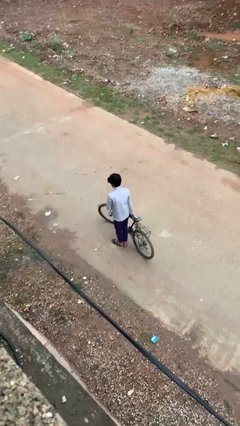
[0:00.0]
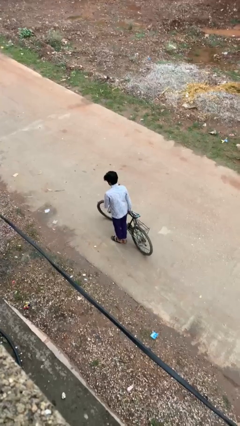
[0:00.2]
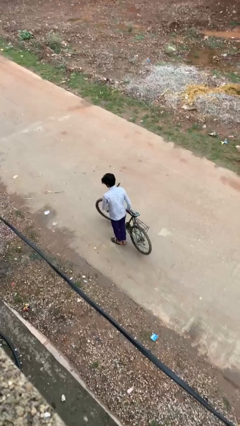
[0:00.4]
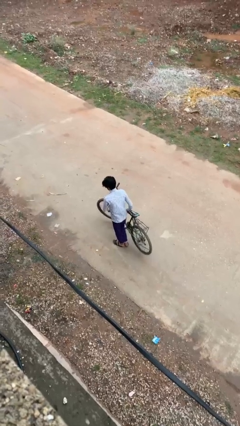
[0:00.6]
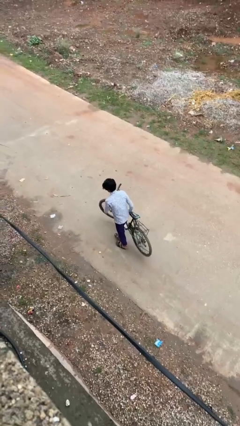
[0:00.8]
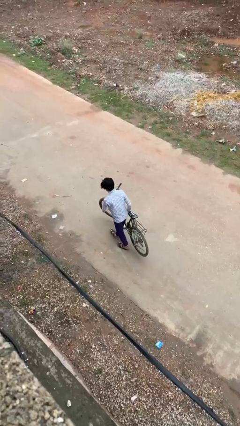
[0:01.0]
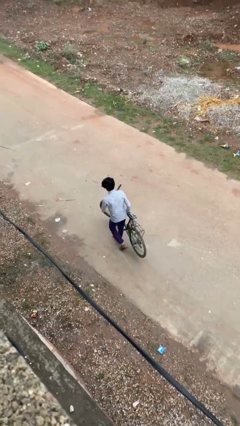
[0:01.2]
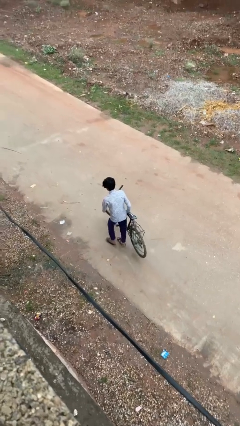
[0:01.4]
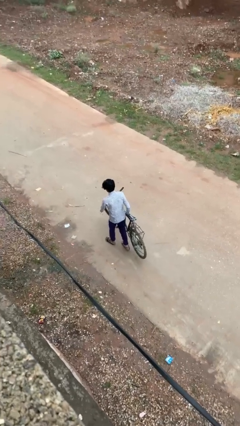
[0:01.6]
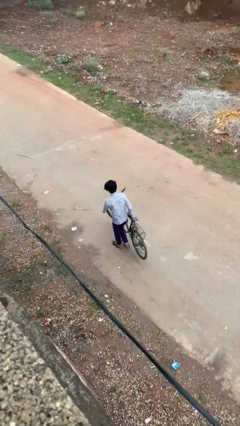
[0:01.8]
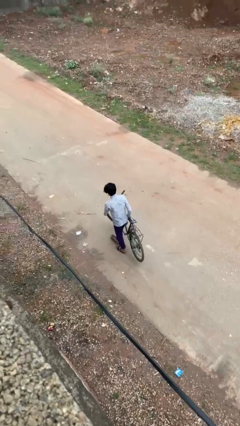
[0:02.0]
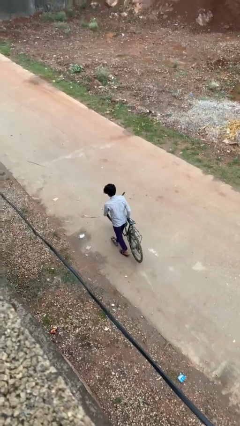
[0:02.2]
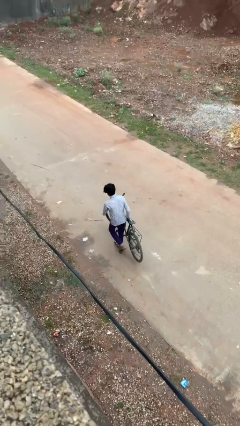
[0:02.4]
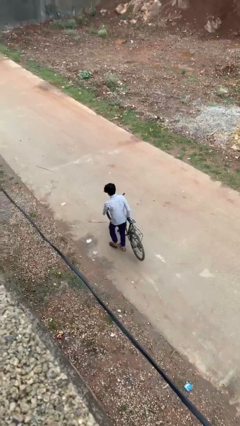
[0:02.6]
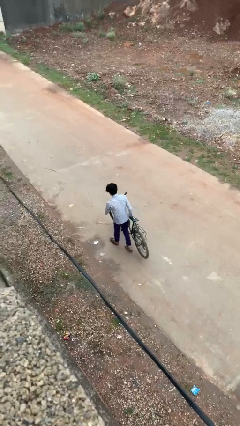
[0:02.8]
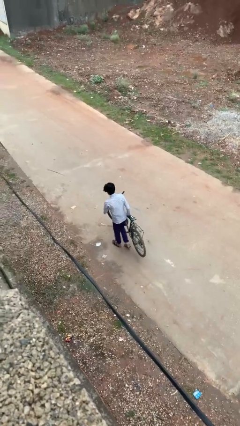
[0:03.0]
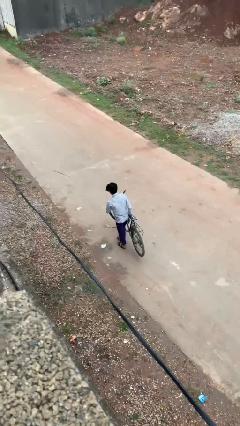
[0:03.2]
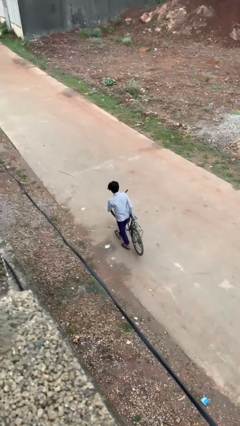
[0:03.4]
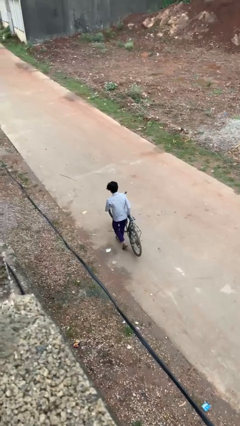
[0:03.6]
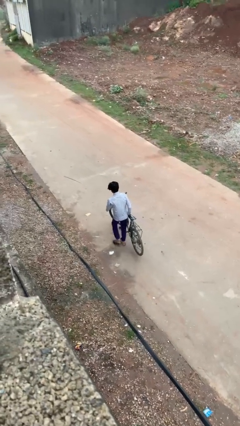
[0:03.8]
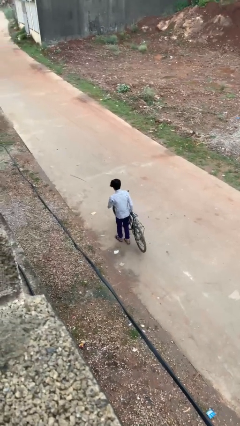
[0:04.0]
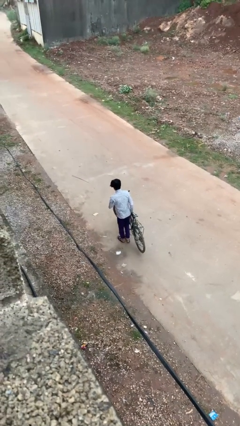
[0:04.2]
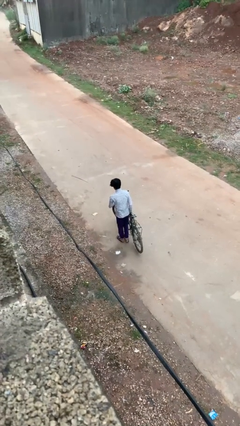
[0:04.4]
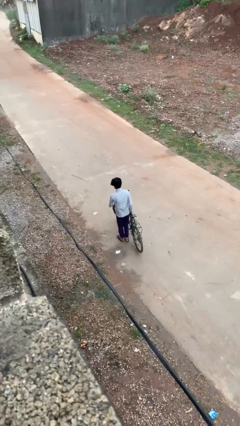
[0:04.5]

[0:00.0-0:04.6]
person carries bicycle

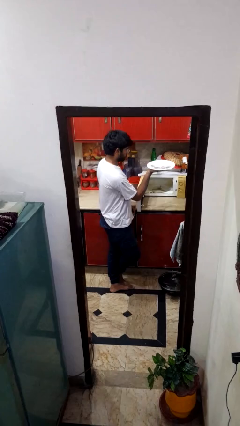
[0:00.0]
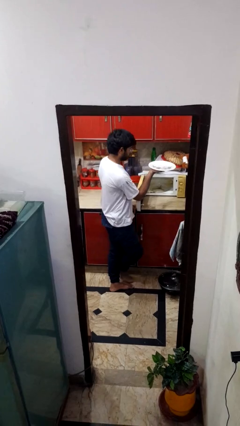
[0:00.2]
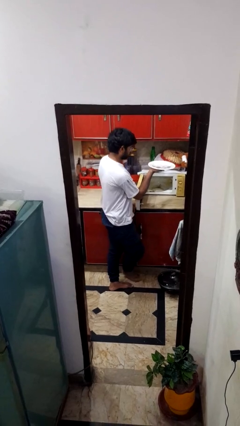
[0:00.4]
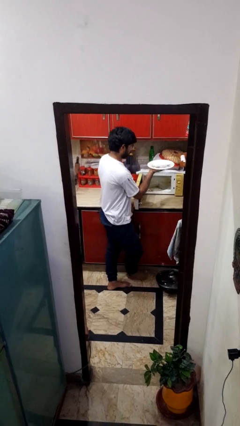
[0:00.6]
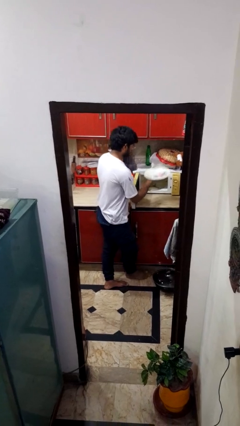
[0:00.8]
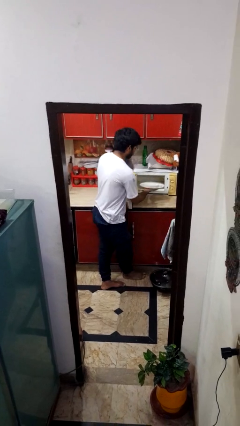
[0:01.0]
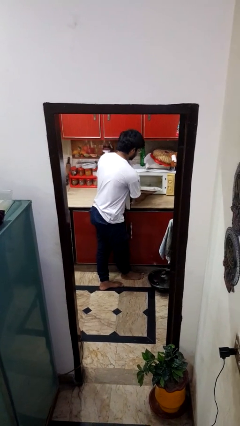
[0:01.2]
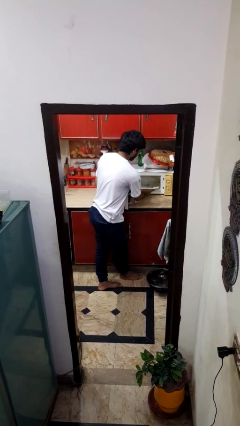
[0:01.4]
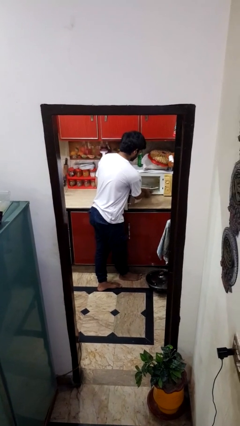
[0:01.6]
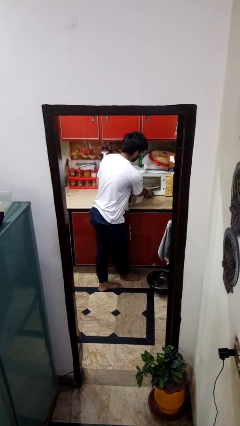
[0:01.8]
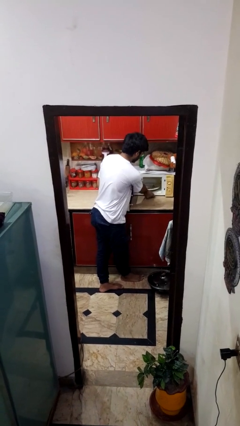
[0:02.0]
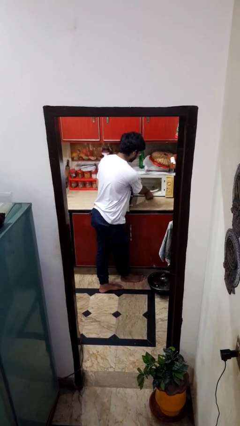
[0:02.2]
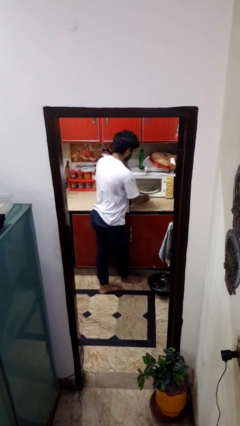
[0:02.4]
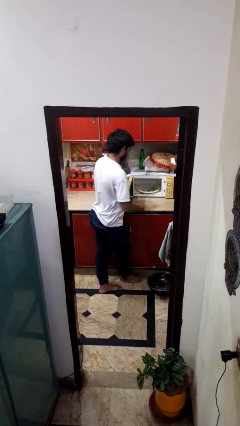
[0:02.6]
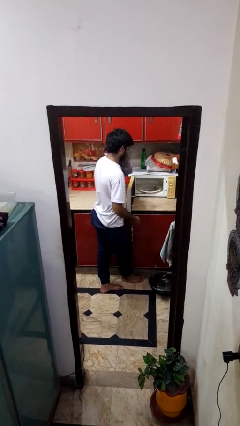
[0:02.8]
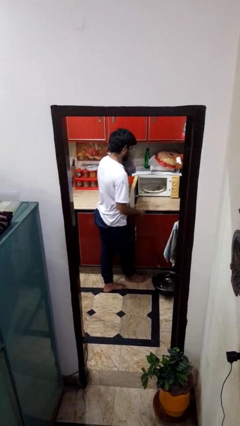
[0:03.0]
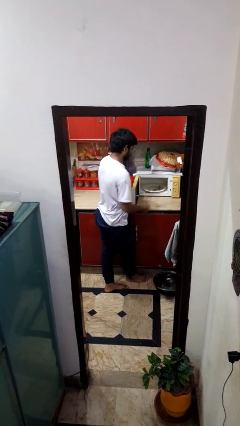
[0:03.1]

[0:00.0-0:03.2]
person puts object into oven

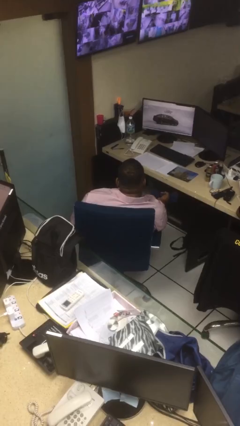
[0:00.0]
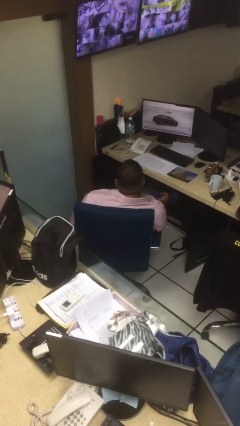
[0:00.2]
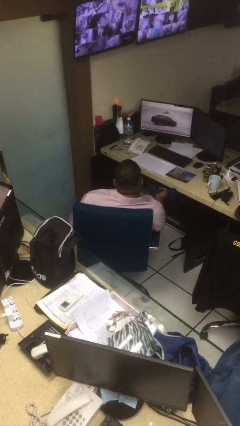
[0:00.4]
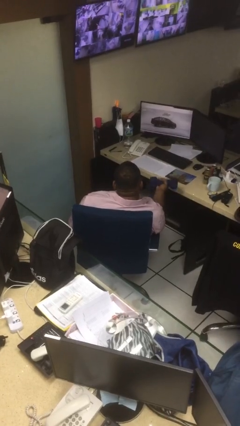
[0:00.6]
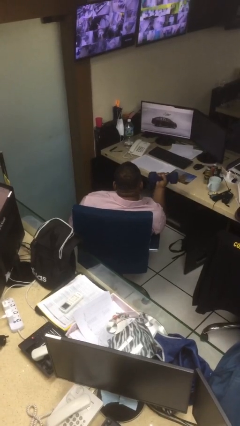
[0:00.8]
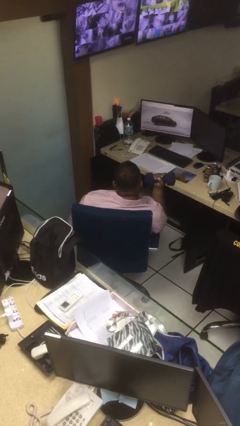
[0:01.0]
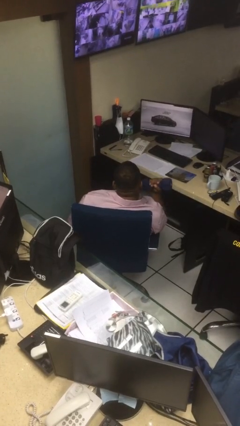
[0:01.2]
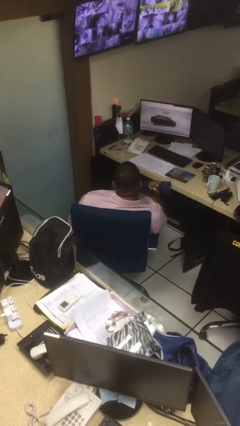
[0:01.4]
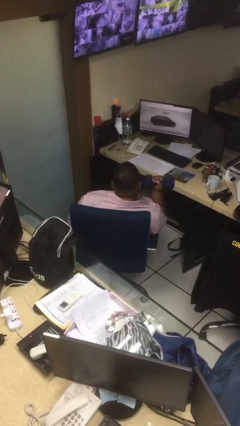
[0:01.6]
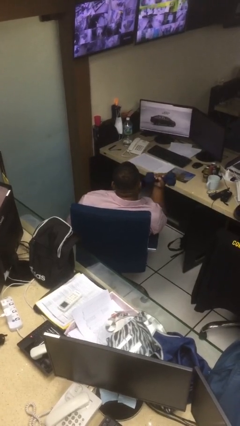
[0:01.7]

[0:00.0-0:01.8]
person lifts dumbbells

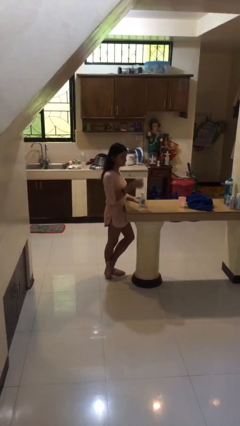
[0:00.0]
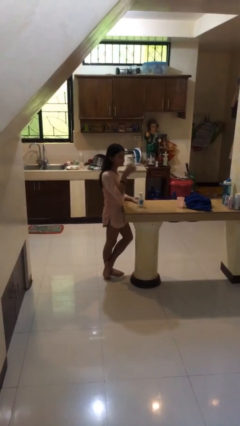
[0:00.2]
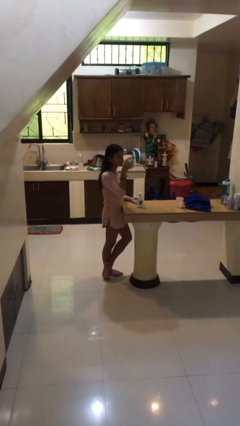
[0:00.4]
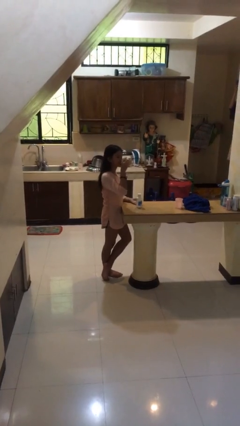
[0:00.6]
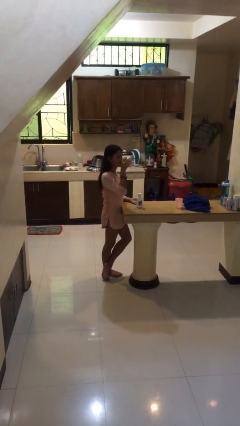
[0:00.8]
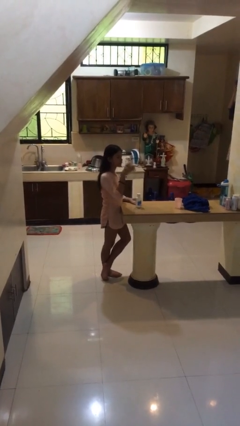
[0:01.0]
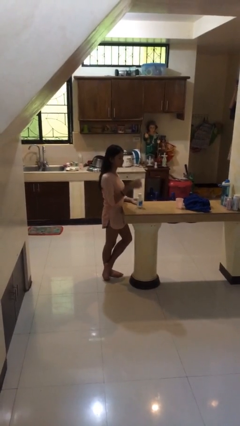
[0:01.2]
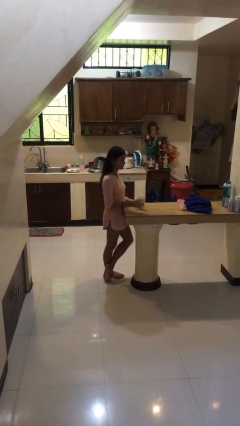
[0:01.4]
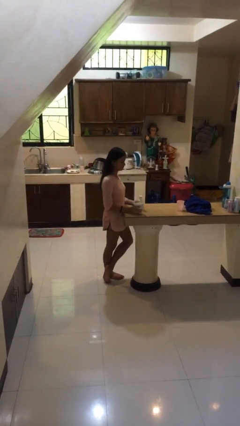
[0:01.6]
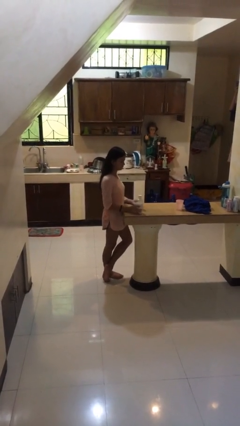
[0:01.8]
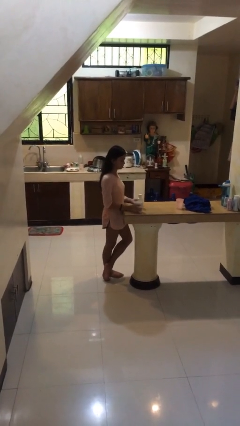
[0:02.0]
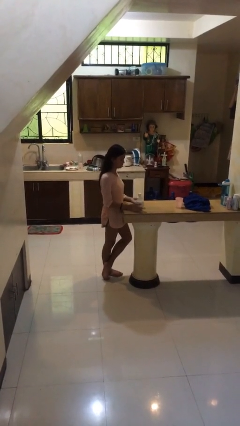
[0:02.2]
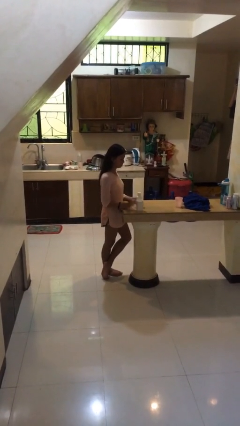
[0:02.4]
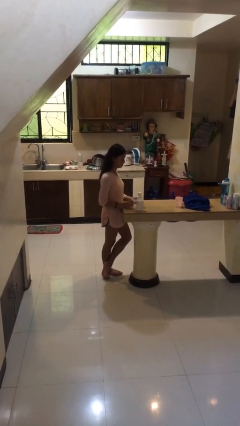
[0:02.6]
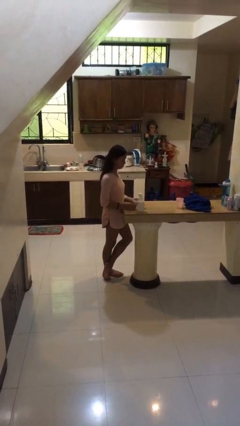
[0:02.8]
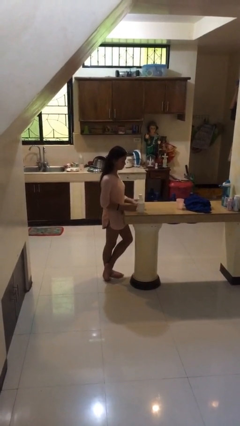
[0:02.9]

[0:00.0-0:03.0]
person drinks from cup

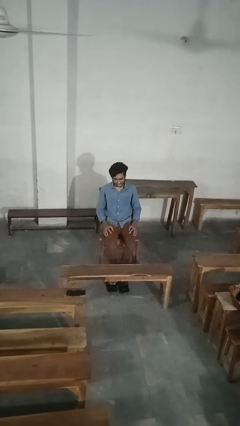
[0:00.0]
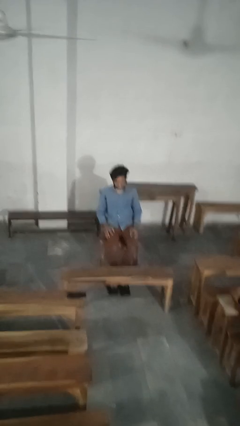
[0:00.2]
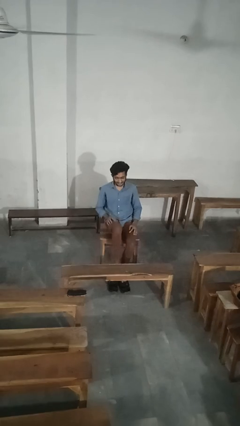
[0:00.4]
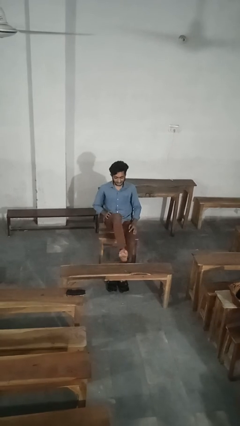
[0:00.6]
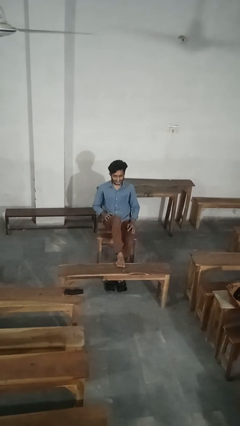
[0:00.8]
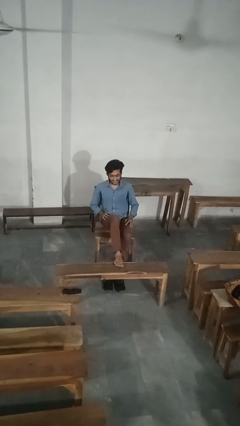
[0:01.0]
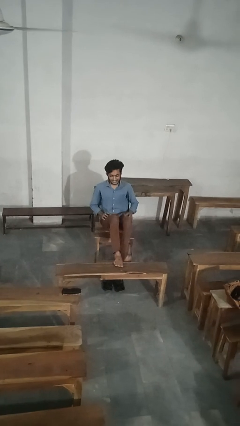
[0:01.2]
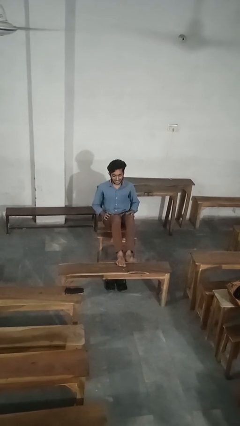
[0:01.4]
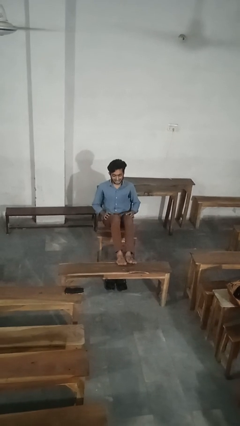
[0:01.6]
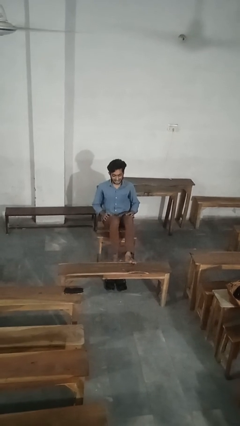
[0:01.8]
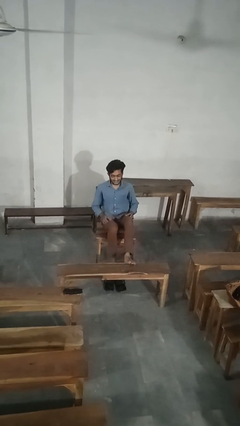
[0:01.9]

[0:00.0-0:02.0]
person puts feet up

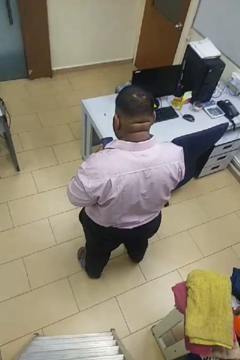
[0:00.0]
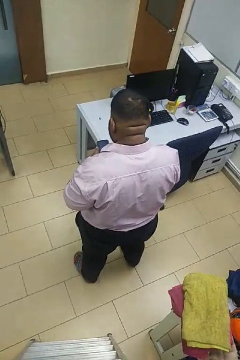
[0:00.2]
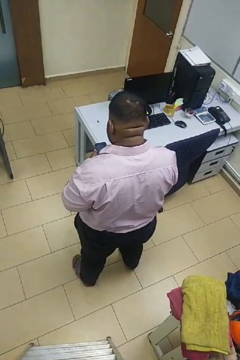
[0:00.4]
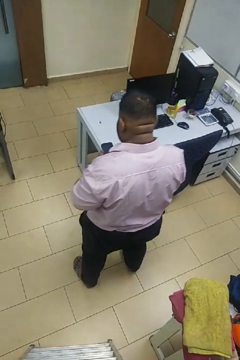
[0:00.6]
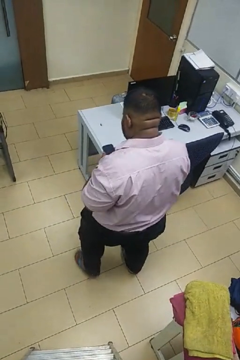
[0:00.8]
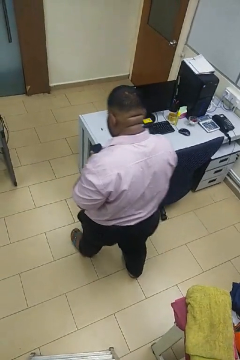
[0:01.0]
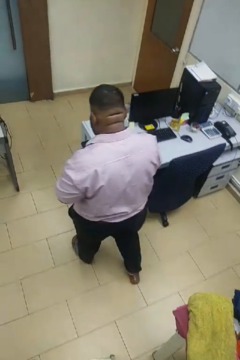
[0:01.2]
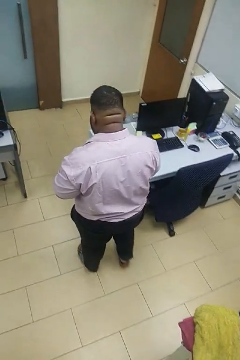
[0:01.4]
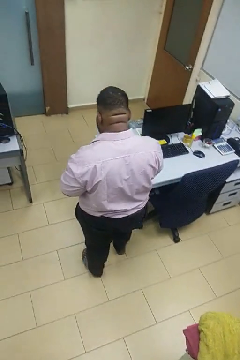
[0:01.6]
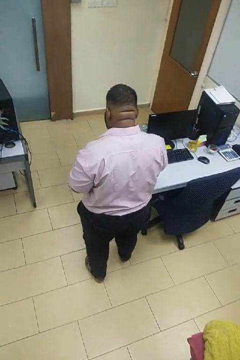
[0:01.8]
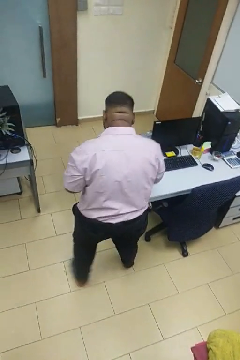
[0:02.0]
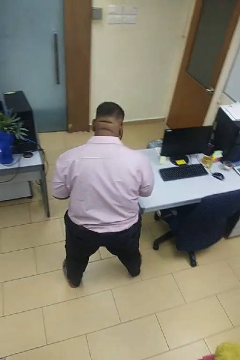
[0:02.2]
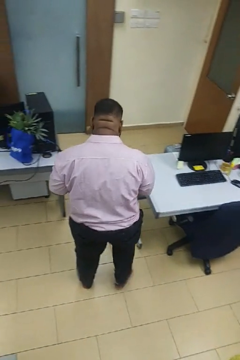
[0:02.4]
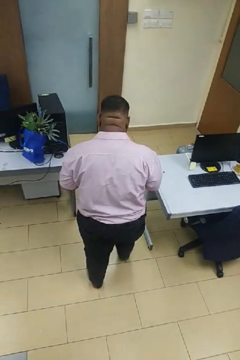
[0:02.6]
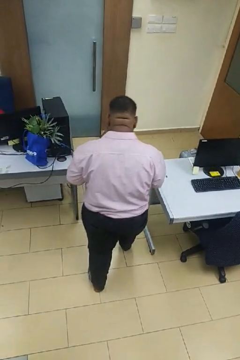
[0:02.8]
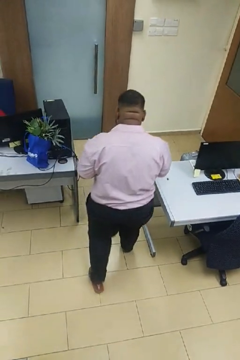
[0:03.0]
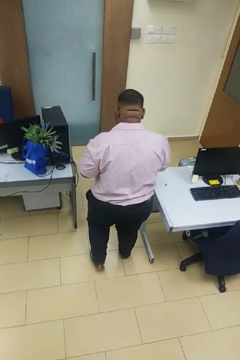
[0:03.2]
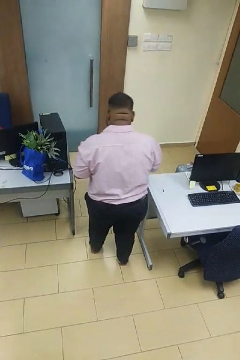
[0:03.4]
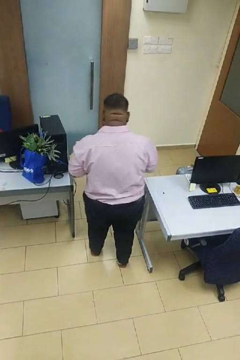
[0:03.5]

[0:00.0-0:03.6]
person bumps into table
